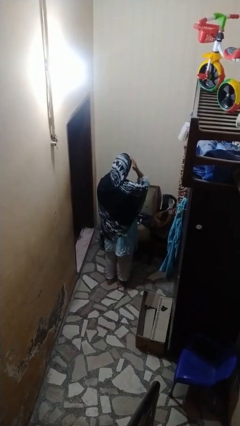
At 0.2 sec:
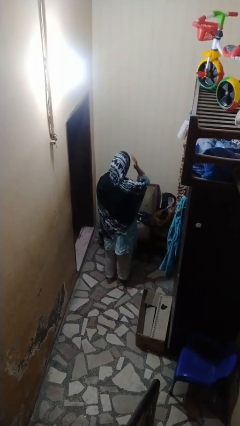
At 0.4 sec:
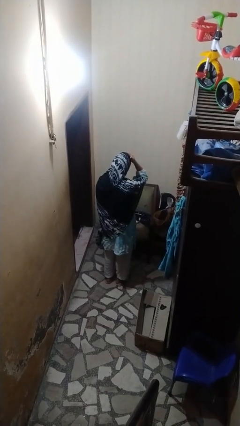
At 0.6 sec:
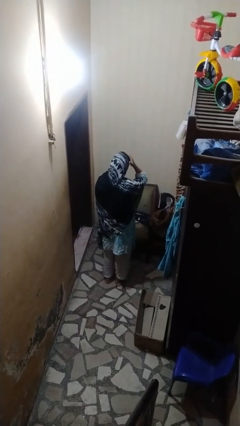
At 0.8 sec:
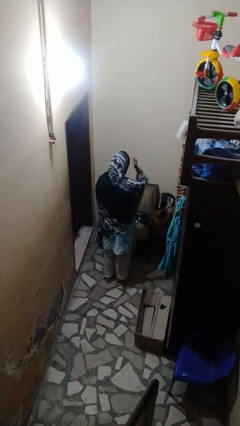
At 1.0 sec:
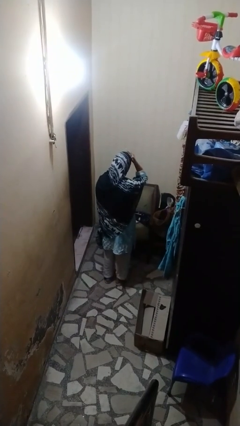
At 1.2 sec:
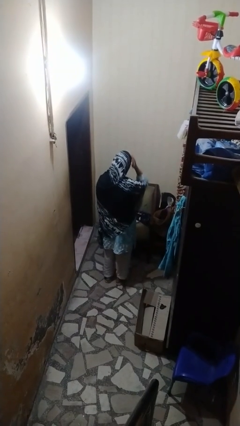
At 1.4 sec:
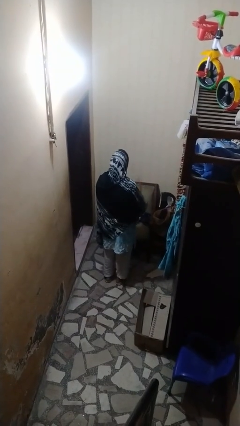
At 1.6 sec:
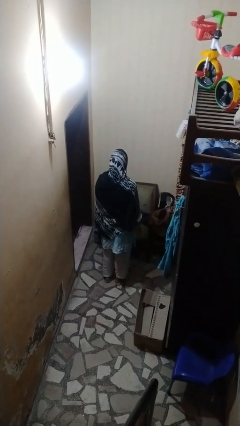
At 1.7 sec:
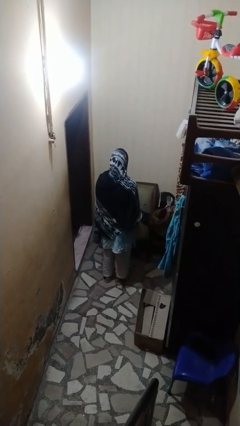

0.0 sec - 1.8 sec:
person pats head

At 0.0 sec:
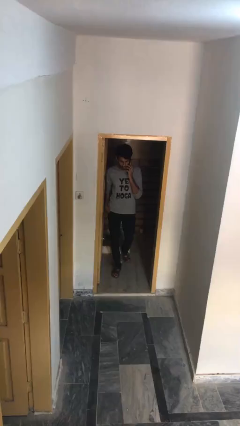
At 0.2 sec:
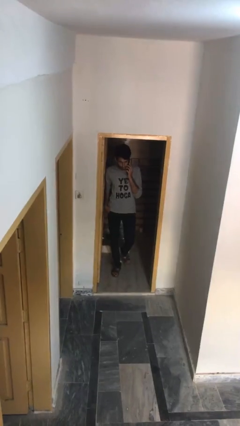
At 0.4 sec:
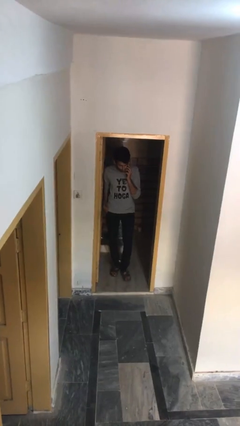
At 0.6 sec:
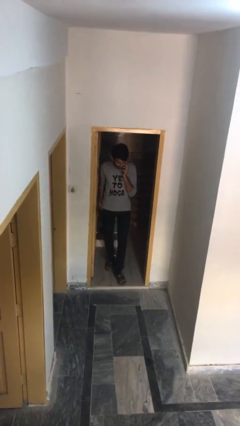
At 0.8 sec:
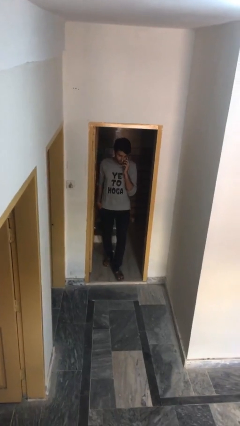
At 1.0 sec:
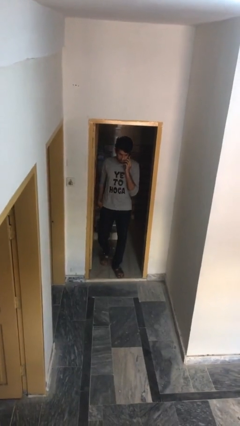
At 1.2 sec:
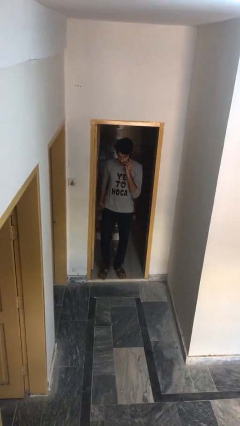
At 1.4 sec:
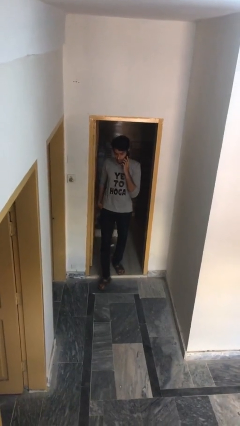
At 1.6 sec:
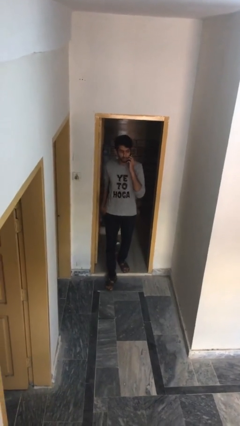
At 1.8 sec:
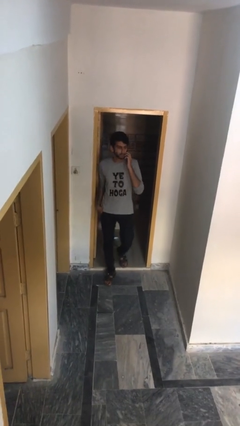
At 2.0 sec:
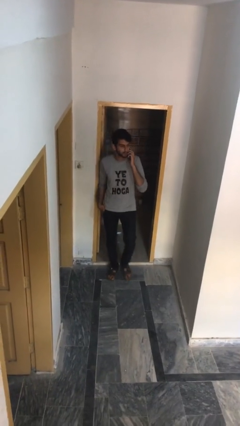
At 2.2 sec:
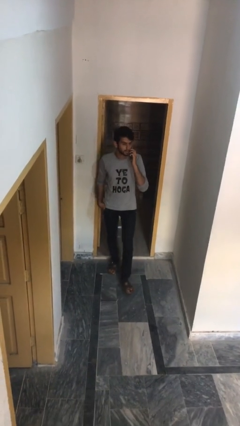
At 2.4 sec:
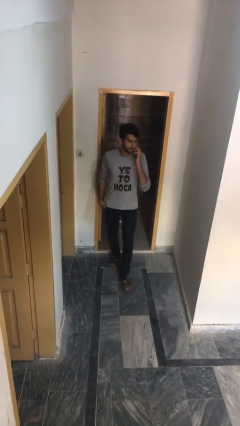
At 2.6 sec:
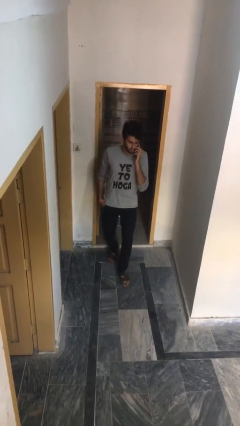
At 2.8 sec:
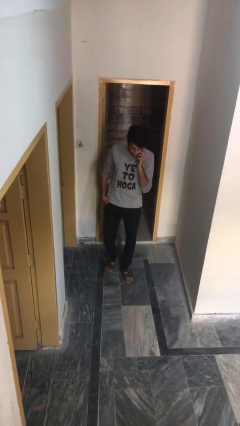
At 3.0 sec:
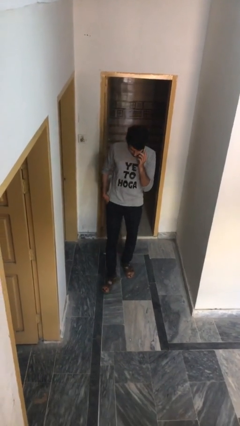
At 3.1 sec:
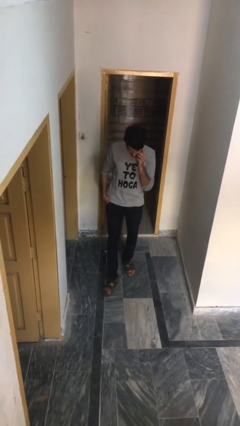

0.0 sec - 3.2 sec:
person enters scene through structure

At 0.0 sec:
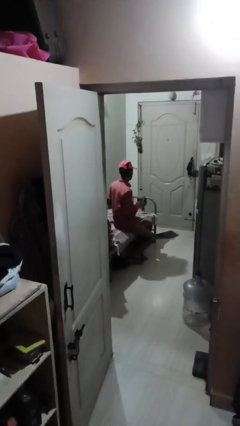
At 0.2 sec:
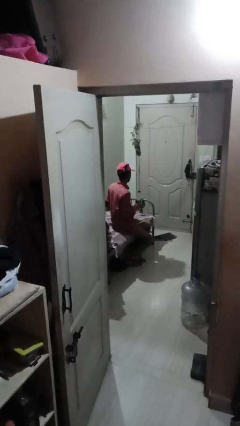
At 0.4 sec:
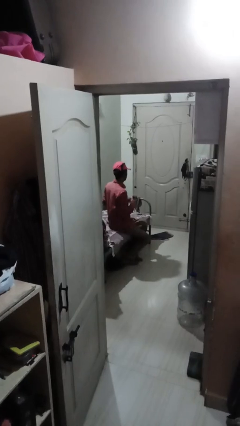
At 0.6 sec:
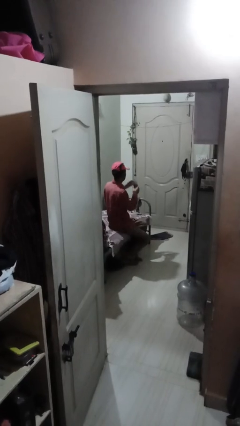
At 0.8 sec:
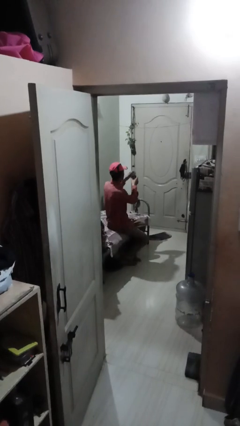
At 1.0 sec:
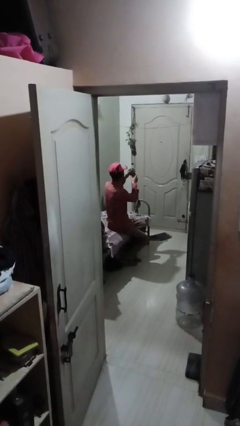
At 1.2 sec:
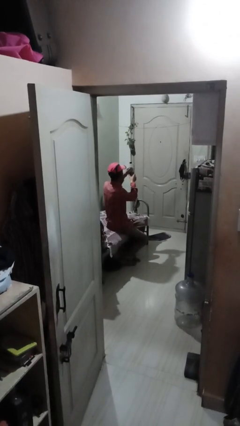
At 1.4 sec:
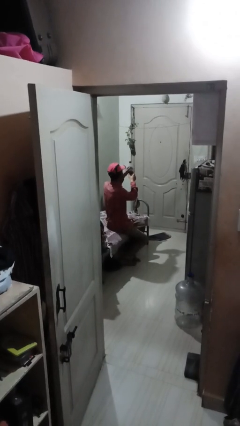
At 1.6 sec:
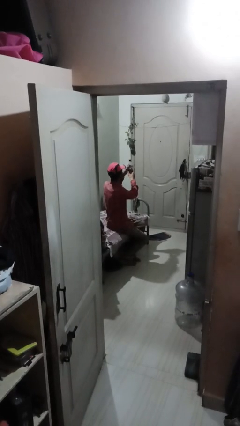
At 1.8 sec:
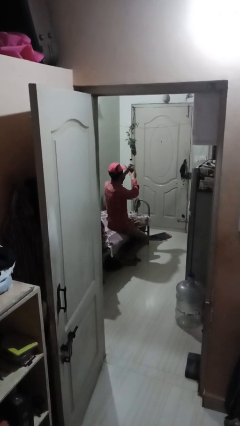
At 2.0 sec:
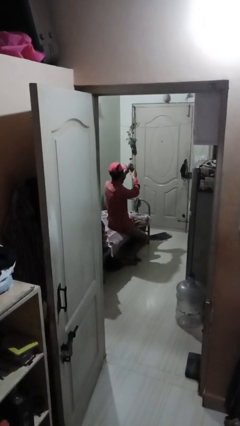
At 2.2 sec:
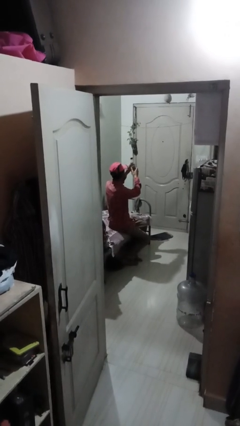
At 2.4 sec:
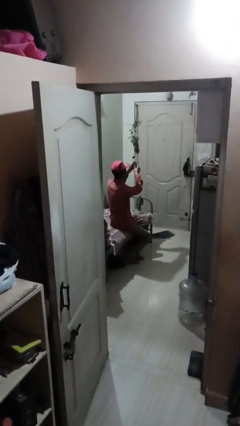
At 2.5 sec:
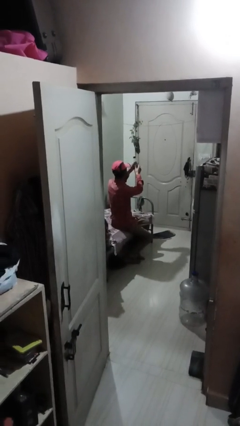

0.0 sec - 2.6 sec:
person squeezes object

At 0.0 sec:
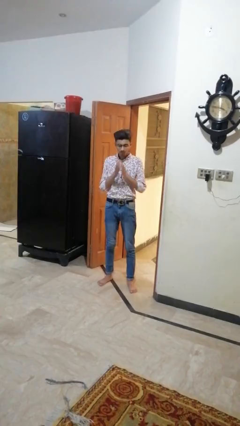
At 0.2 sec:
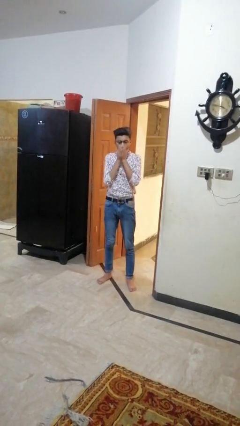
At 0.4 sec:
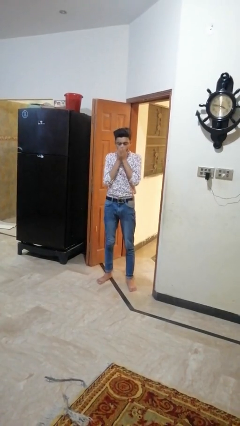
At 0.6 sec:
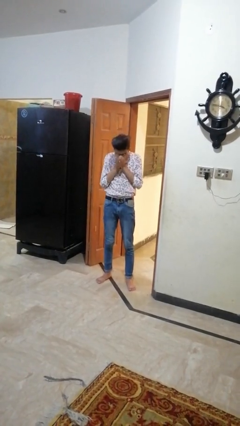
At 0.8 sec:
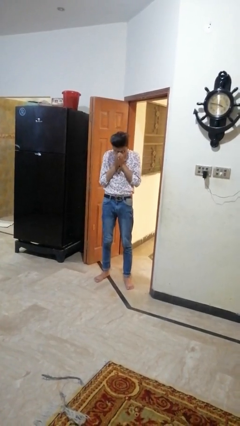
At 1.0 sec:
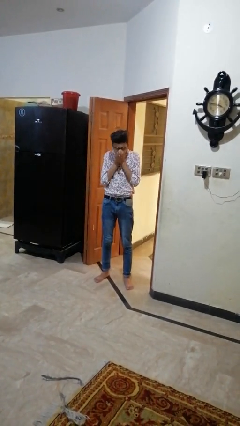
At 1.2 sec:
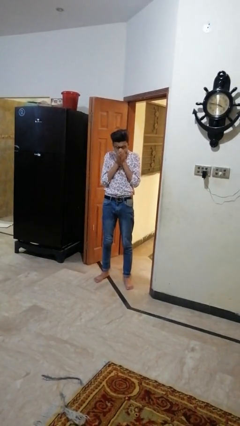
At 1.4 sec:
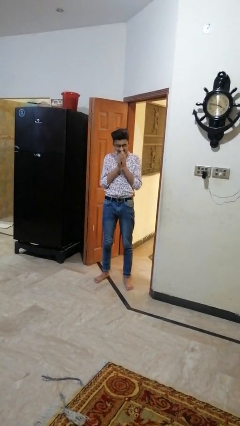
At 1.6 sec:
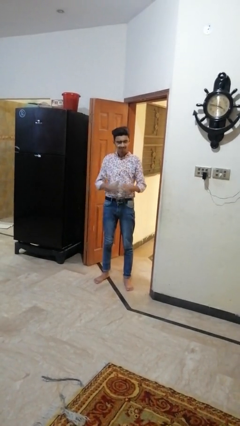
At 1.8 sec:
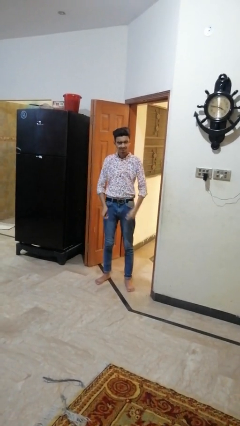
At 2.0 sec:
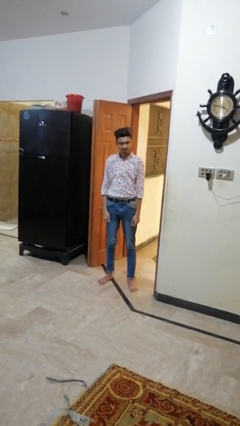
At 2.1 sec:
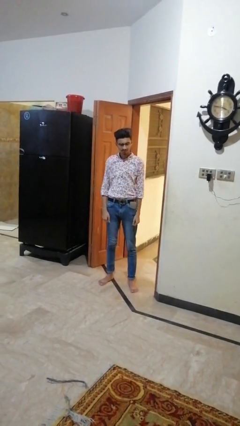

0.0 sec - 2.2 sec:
person sneezes into hand

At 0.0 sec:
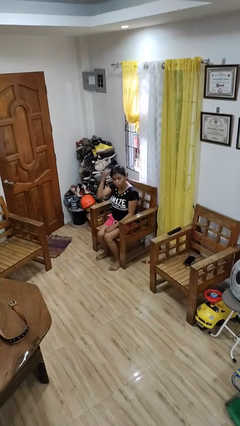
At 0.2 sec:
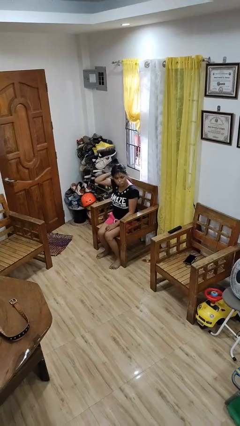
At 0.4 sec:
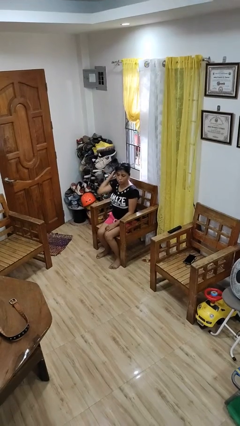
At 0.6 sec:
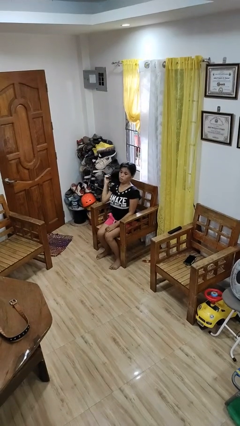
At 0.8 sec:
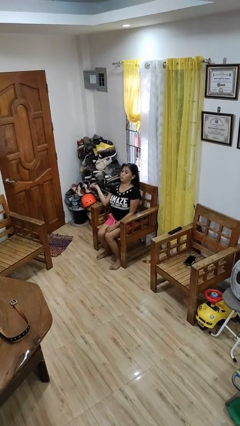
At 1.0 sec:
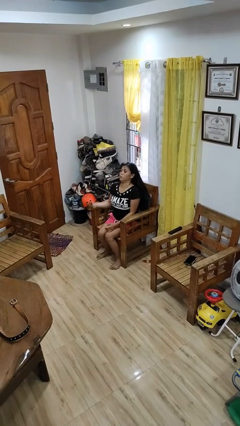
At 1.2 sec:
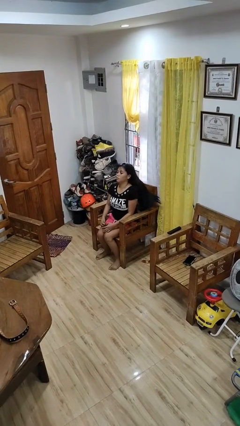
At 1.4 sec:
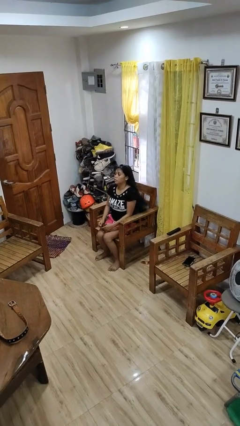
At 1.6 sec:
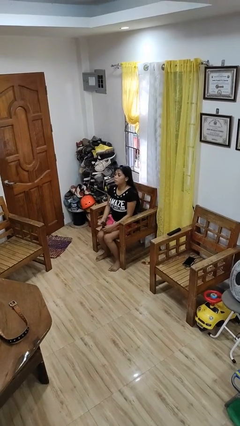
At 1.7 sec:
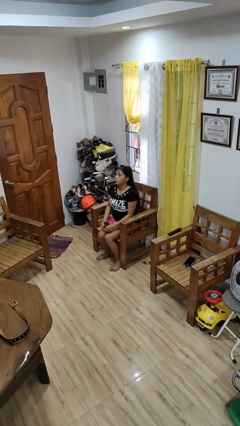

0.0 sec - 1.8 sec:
person takes off hairtie

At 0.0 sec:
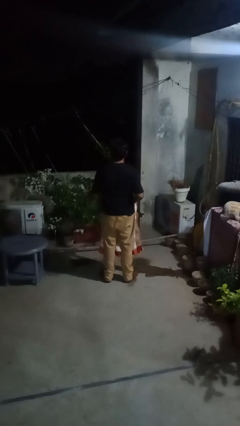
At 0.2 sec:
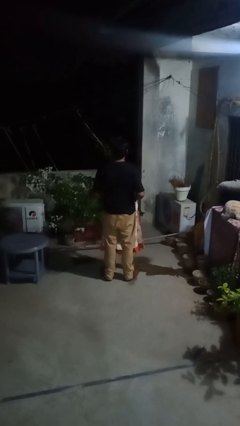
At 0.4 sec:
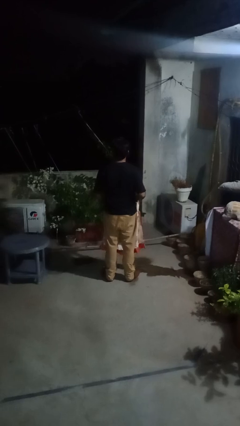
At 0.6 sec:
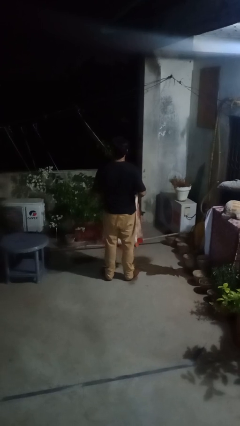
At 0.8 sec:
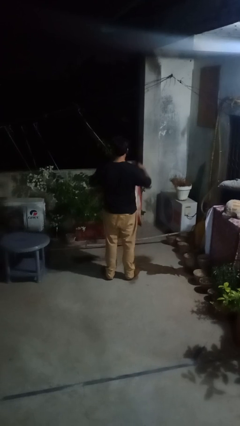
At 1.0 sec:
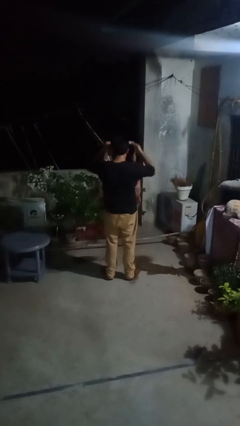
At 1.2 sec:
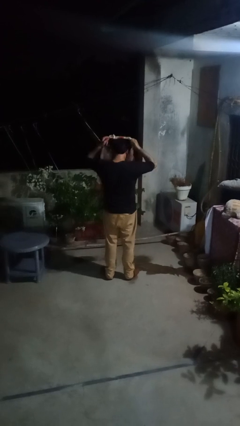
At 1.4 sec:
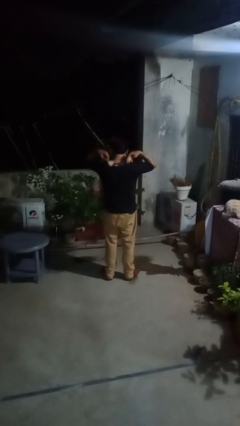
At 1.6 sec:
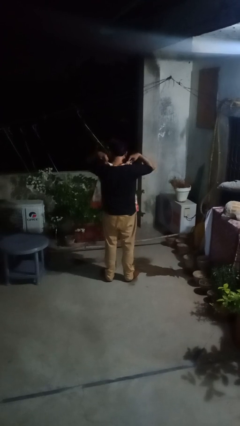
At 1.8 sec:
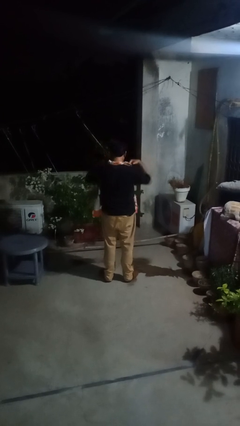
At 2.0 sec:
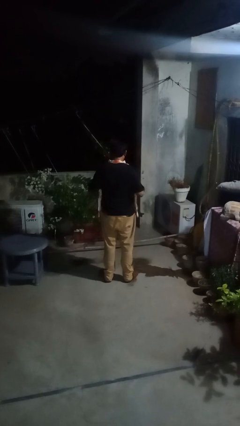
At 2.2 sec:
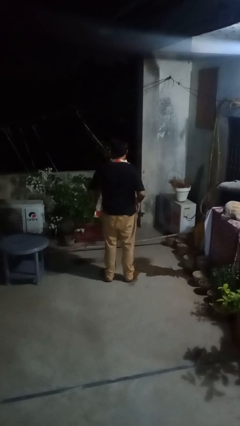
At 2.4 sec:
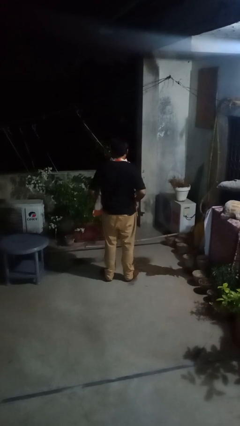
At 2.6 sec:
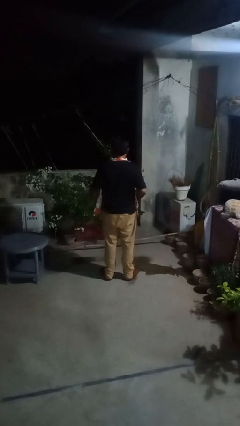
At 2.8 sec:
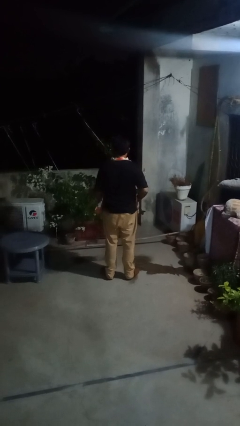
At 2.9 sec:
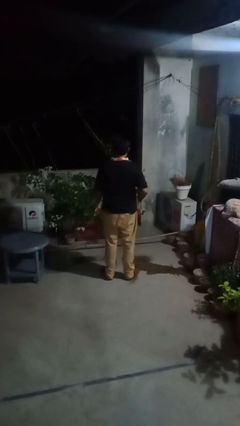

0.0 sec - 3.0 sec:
person puts on apron

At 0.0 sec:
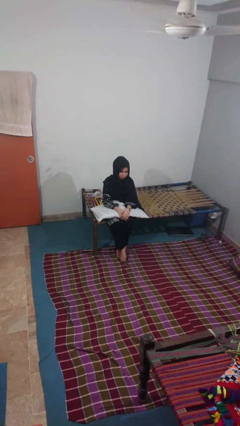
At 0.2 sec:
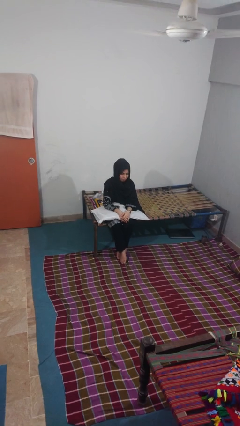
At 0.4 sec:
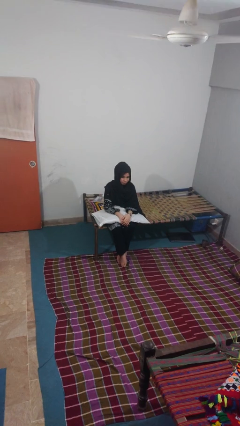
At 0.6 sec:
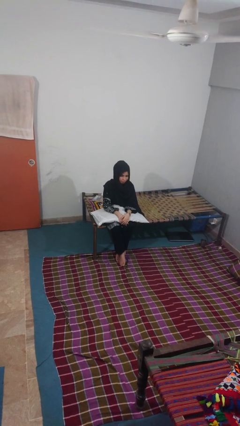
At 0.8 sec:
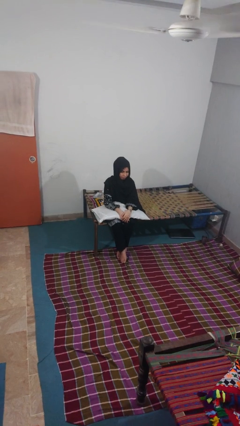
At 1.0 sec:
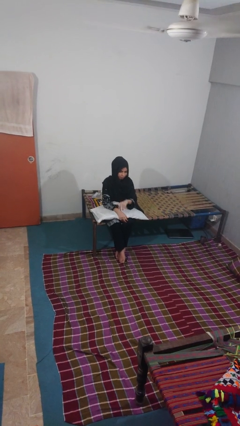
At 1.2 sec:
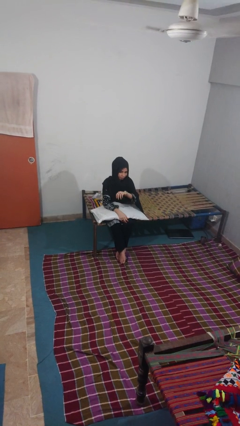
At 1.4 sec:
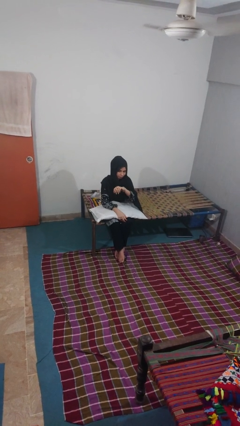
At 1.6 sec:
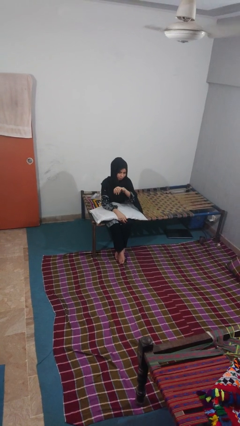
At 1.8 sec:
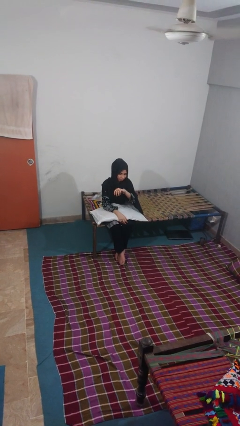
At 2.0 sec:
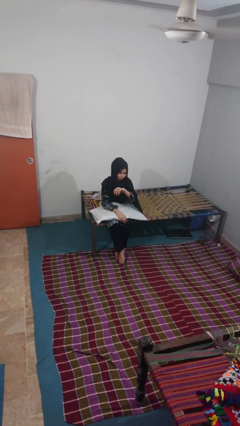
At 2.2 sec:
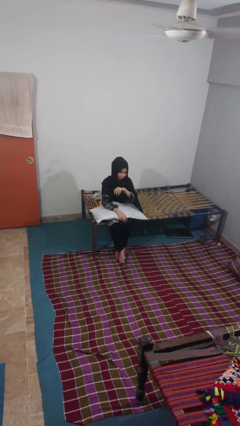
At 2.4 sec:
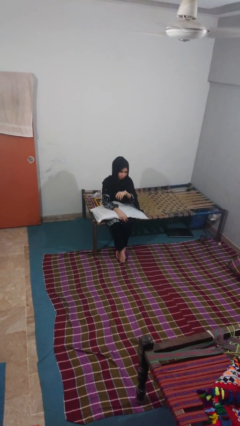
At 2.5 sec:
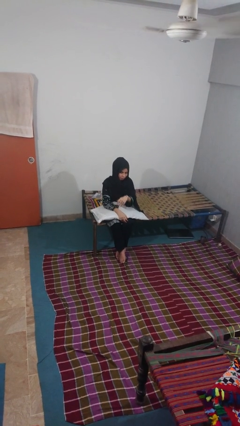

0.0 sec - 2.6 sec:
person looks at wristwatch
